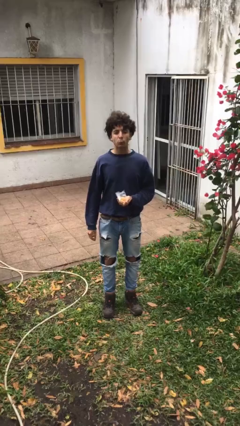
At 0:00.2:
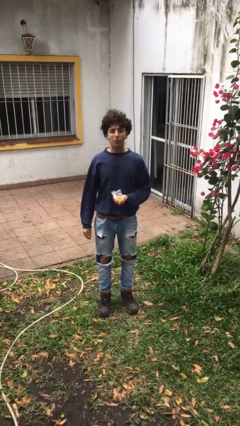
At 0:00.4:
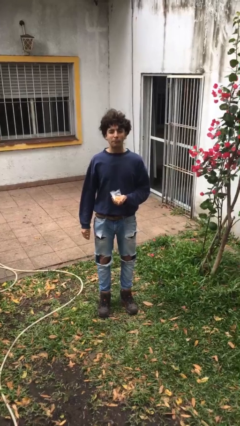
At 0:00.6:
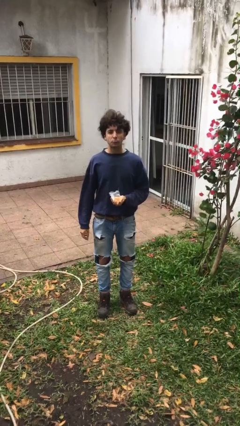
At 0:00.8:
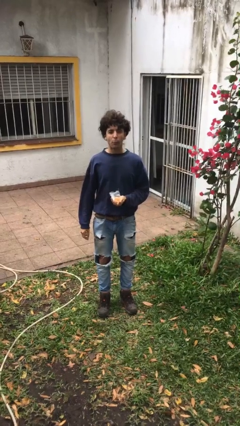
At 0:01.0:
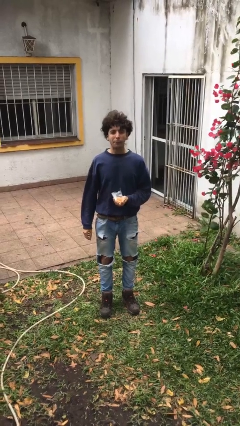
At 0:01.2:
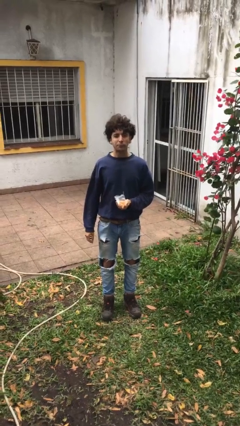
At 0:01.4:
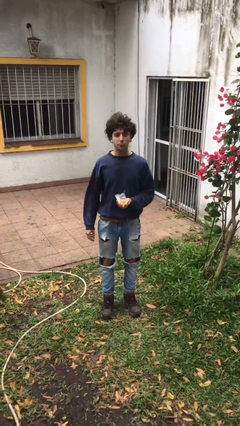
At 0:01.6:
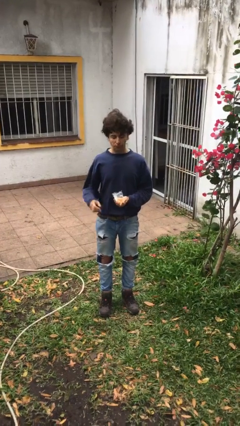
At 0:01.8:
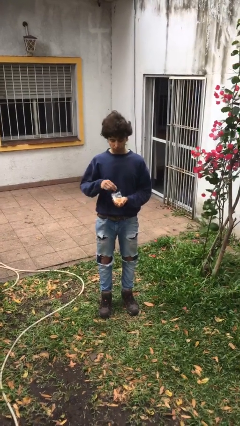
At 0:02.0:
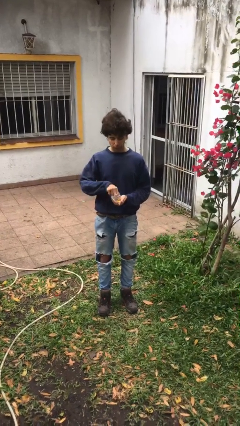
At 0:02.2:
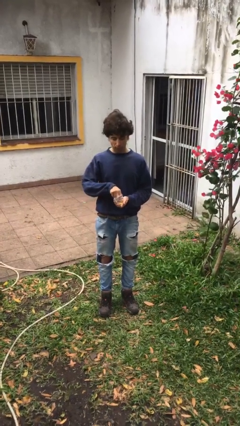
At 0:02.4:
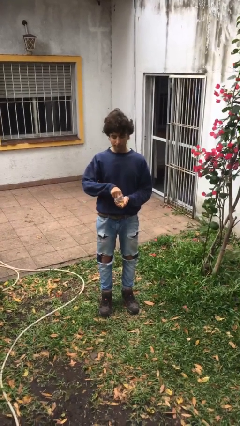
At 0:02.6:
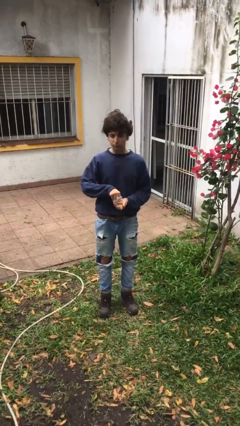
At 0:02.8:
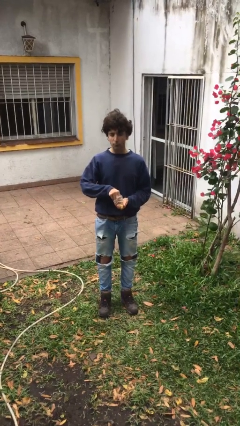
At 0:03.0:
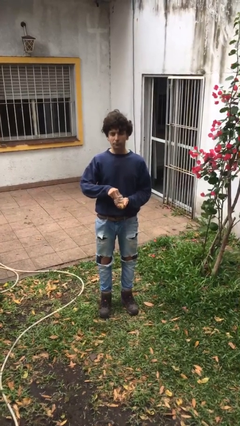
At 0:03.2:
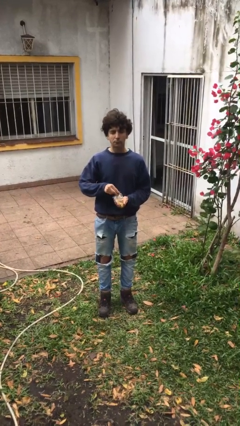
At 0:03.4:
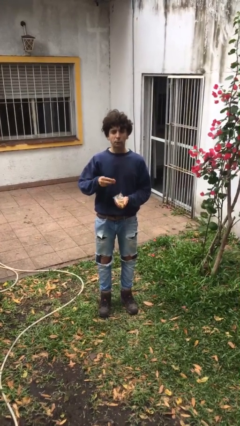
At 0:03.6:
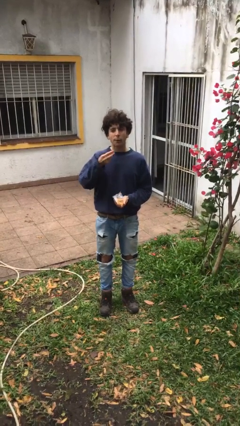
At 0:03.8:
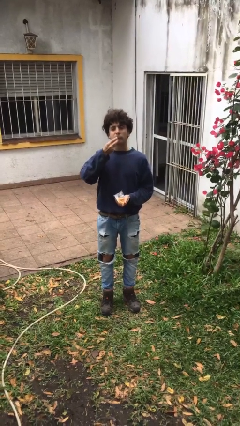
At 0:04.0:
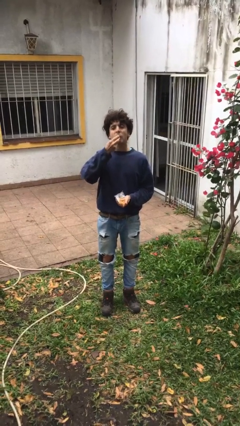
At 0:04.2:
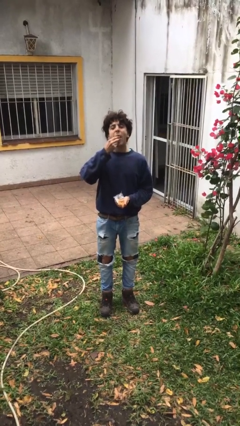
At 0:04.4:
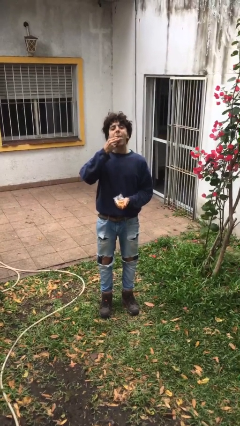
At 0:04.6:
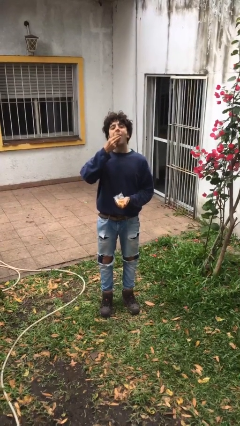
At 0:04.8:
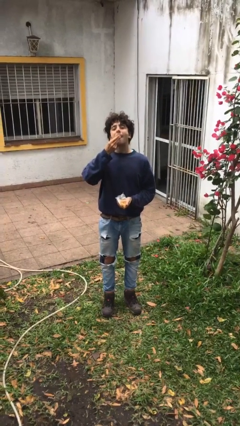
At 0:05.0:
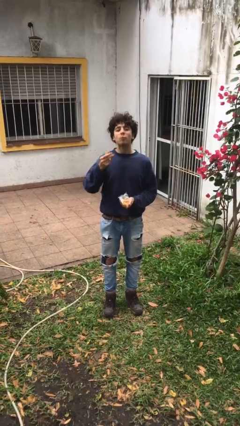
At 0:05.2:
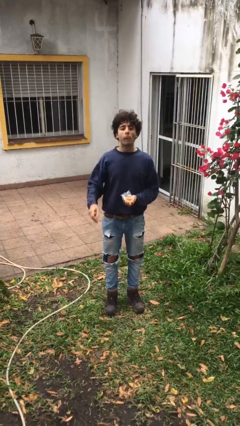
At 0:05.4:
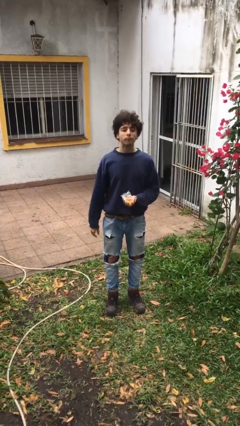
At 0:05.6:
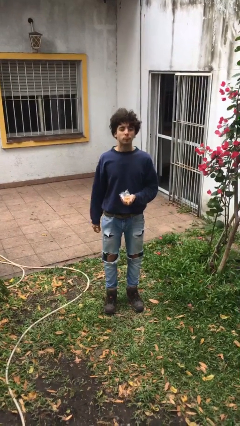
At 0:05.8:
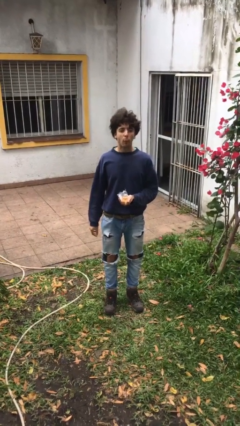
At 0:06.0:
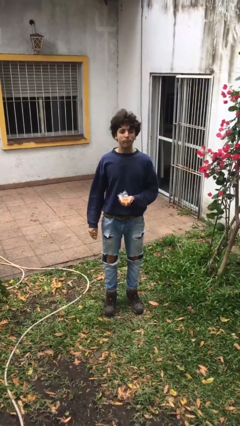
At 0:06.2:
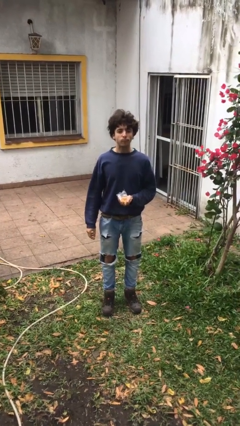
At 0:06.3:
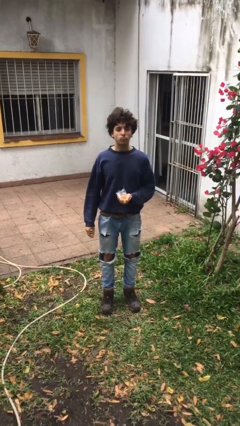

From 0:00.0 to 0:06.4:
person eats snack from bag

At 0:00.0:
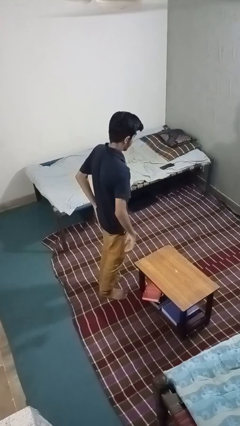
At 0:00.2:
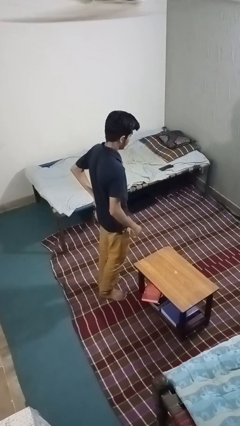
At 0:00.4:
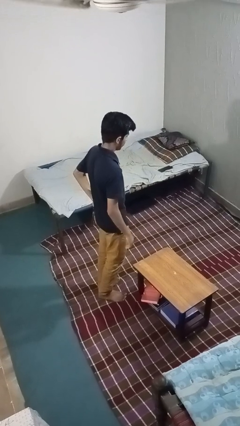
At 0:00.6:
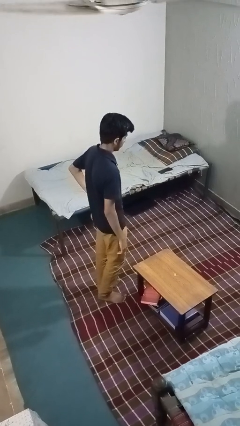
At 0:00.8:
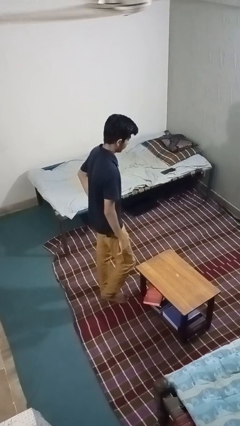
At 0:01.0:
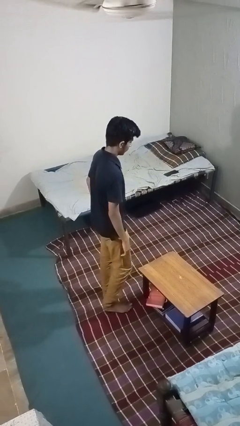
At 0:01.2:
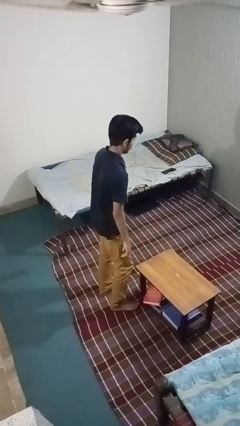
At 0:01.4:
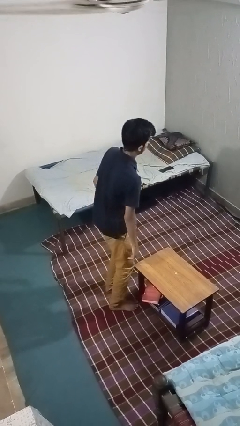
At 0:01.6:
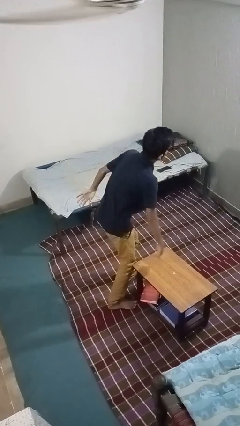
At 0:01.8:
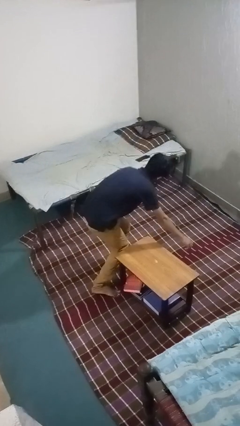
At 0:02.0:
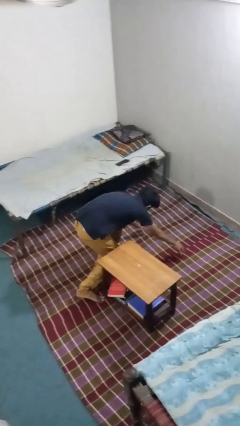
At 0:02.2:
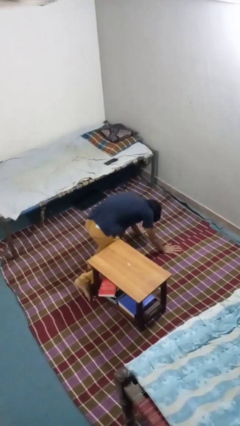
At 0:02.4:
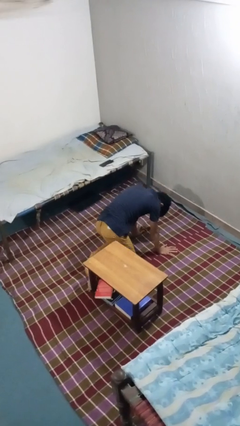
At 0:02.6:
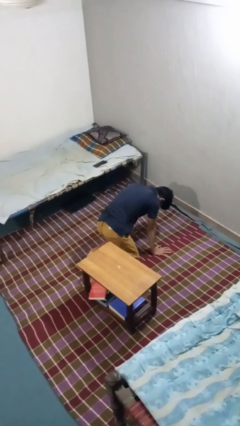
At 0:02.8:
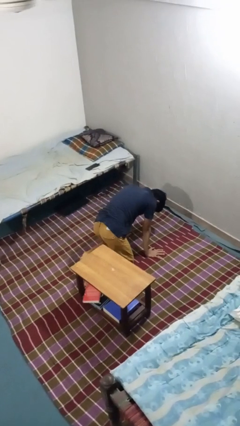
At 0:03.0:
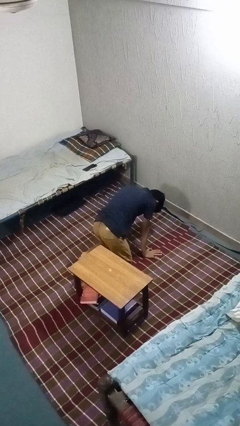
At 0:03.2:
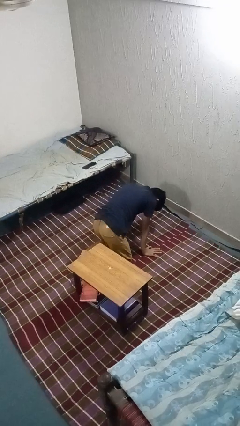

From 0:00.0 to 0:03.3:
person trips on object on floor

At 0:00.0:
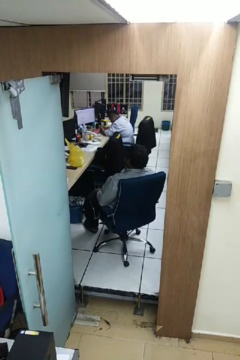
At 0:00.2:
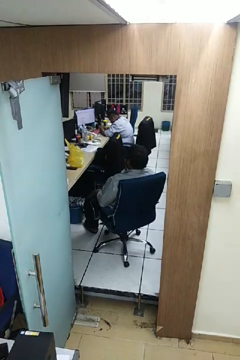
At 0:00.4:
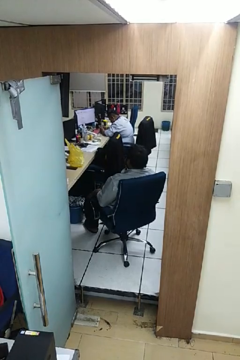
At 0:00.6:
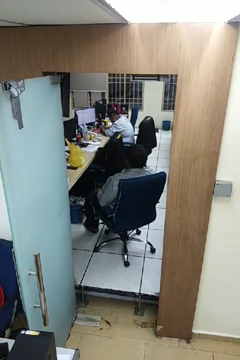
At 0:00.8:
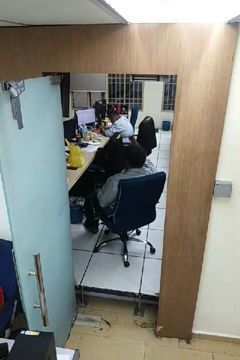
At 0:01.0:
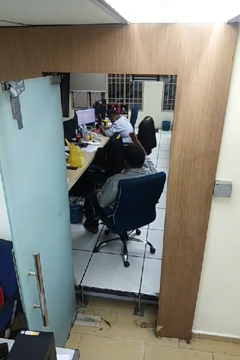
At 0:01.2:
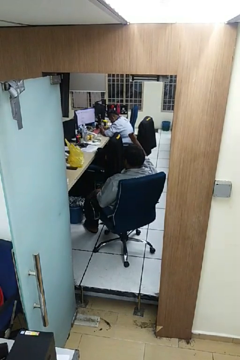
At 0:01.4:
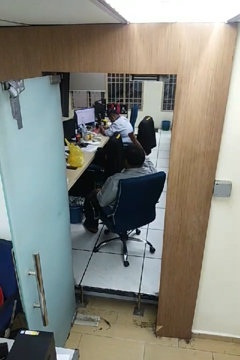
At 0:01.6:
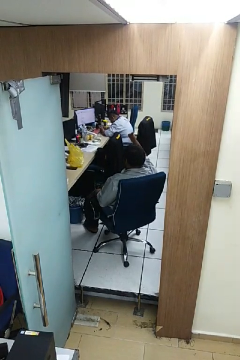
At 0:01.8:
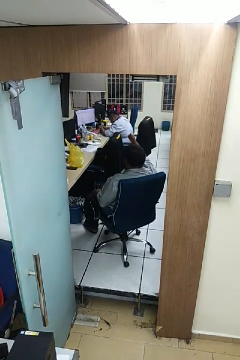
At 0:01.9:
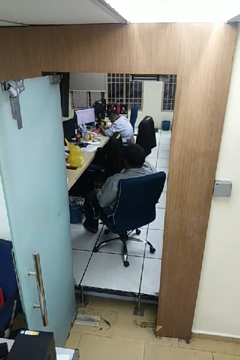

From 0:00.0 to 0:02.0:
person gestures thumbs up

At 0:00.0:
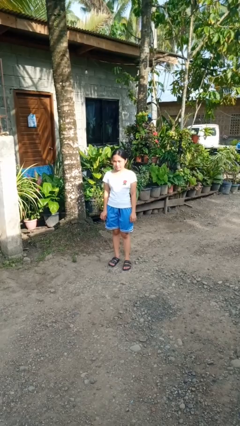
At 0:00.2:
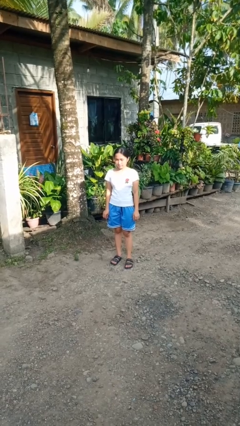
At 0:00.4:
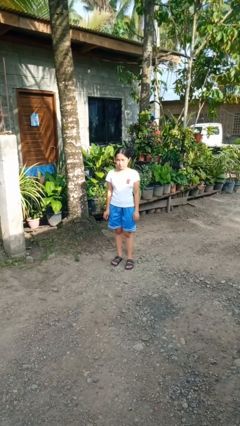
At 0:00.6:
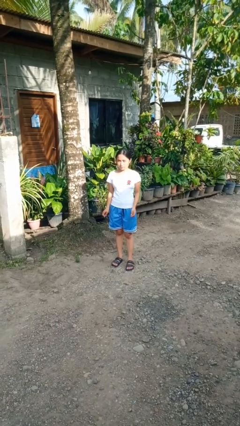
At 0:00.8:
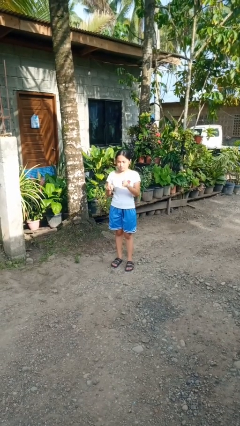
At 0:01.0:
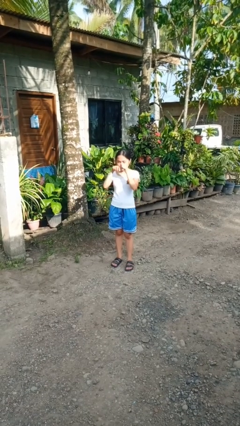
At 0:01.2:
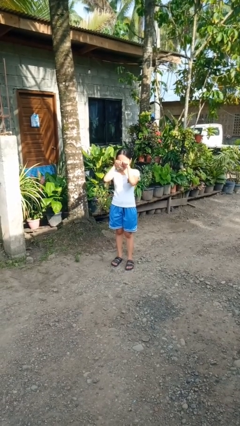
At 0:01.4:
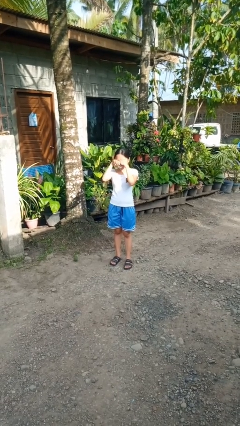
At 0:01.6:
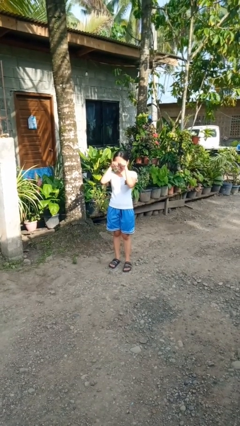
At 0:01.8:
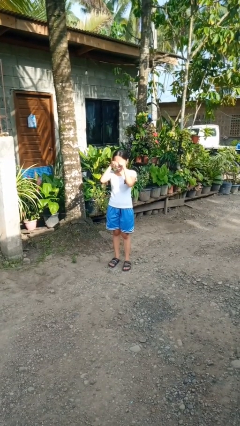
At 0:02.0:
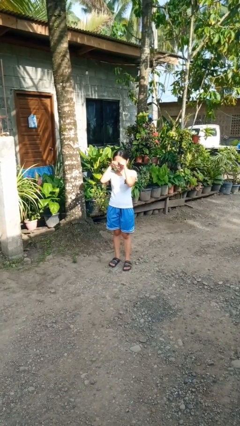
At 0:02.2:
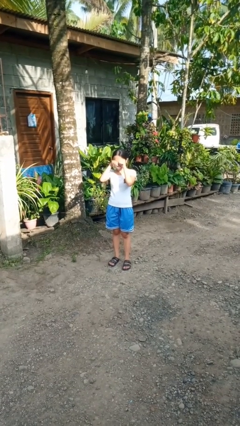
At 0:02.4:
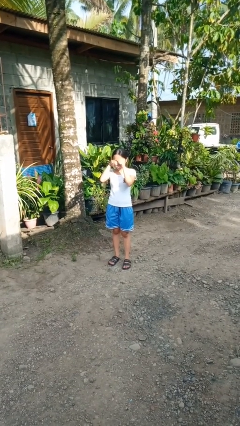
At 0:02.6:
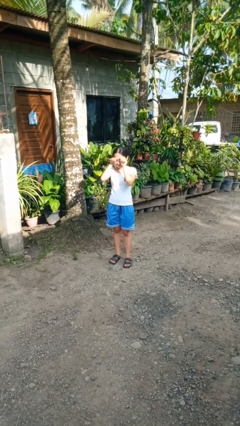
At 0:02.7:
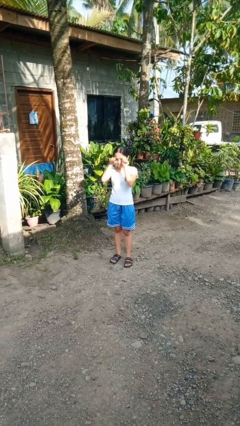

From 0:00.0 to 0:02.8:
person rubs eyes

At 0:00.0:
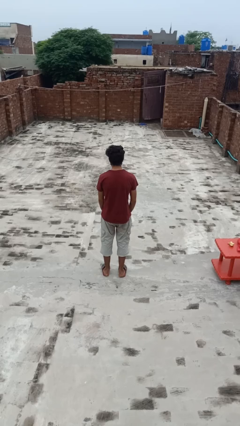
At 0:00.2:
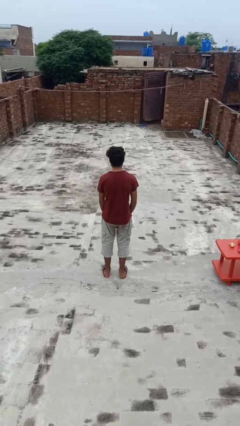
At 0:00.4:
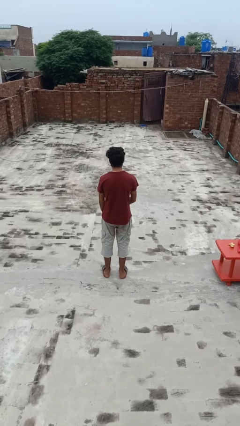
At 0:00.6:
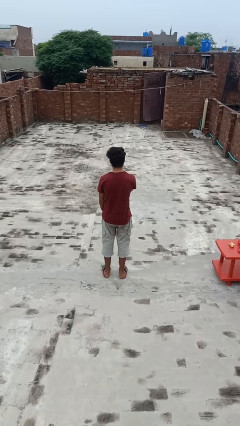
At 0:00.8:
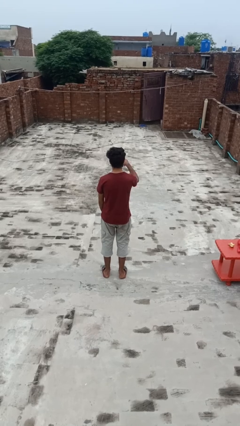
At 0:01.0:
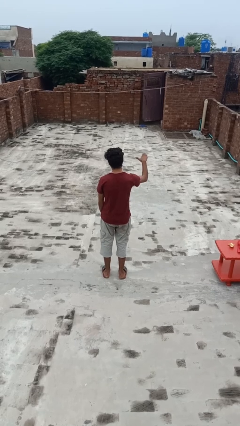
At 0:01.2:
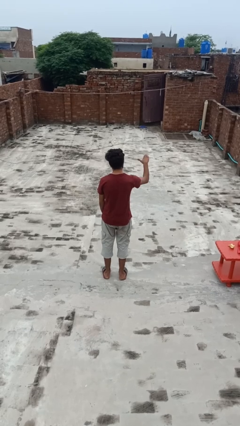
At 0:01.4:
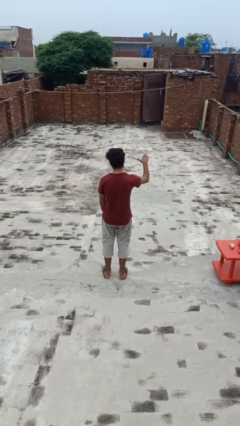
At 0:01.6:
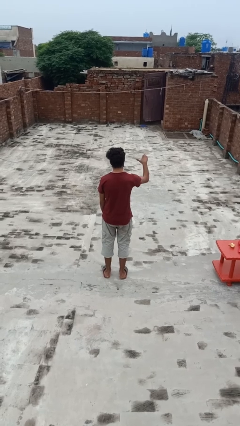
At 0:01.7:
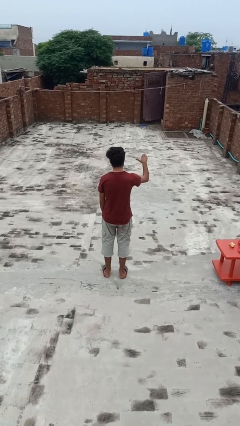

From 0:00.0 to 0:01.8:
person gestures cut

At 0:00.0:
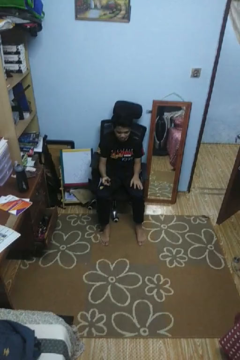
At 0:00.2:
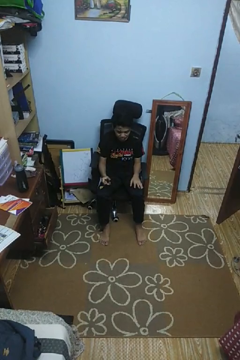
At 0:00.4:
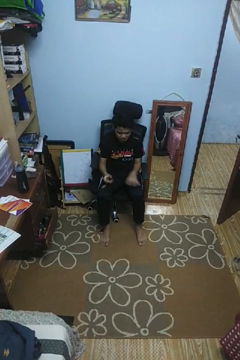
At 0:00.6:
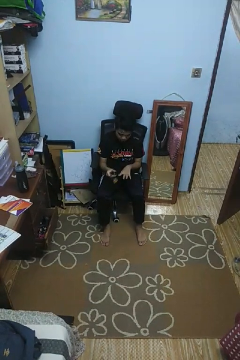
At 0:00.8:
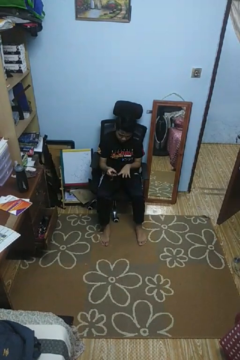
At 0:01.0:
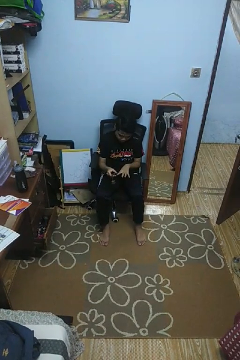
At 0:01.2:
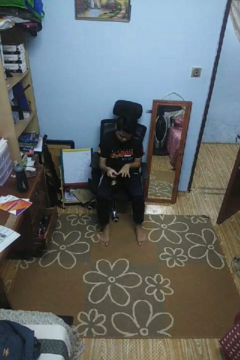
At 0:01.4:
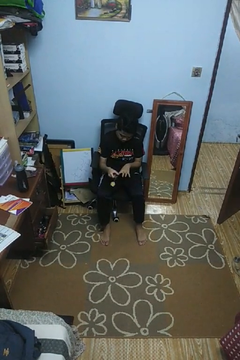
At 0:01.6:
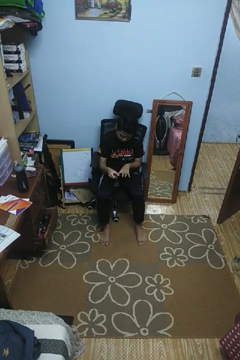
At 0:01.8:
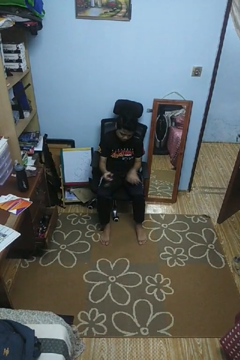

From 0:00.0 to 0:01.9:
person clips fingernails

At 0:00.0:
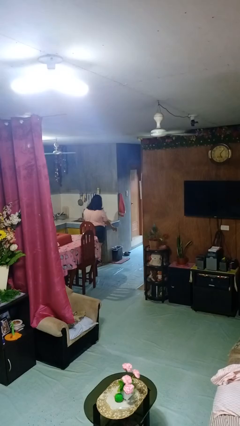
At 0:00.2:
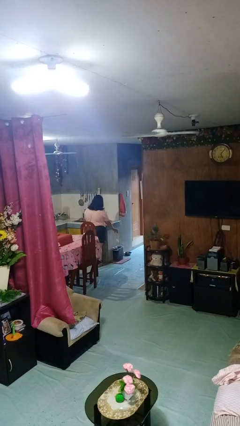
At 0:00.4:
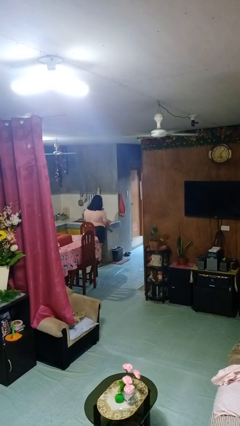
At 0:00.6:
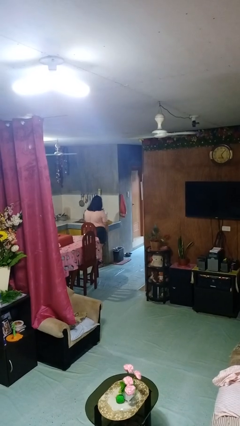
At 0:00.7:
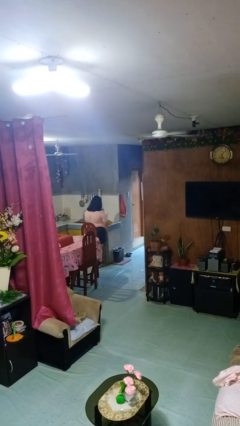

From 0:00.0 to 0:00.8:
person discards trash
